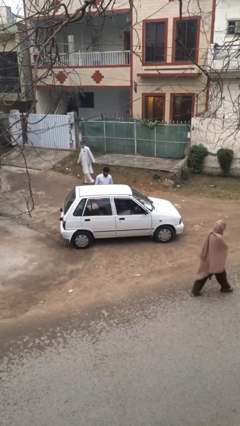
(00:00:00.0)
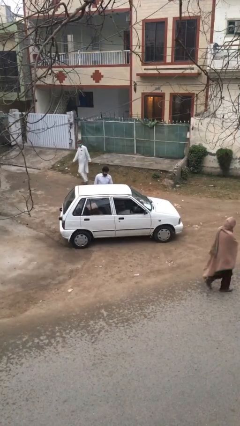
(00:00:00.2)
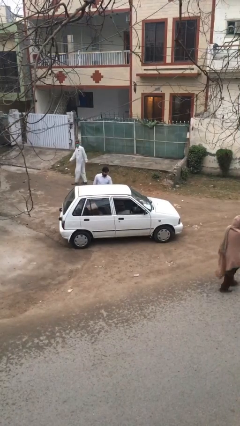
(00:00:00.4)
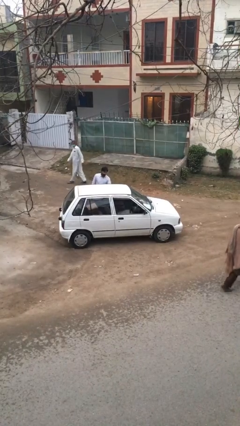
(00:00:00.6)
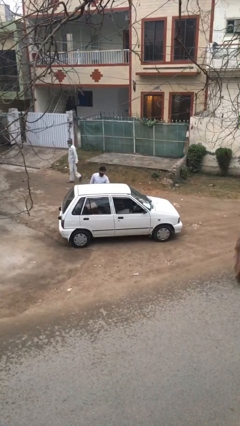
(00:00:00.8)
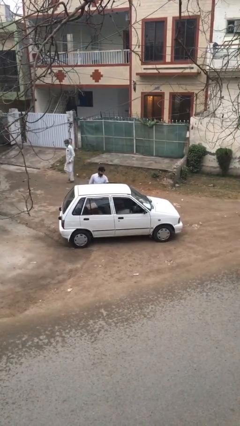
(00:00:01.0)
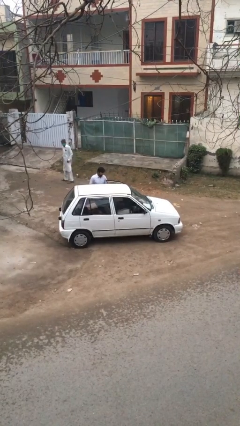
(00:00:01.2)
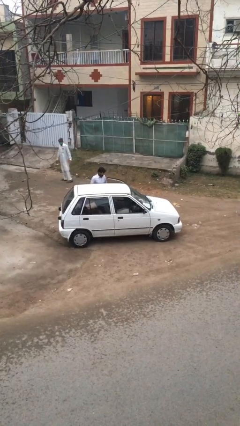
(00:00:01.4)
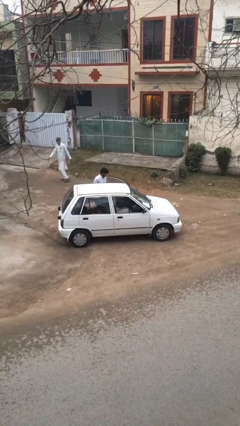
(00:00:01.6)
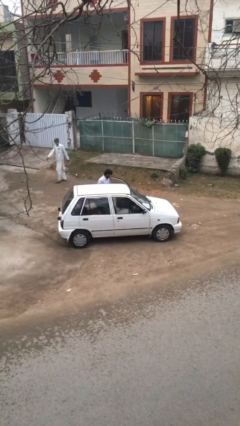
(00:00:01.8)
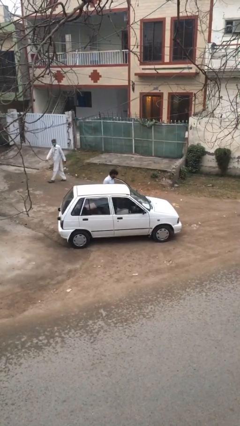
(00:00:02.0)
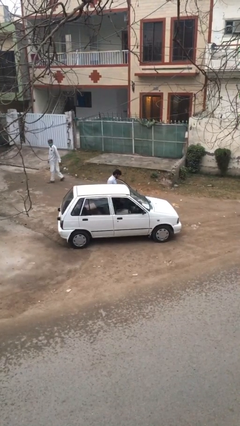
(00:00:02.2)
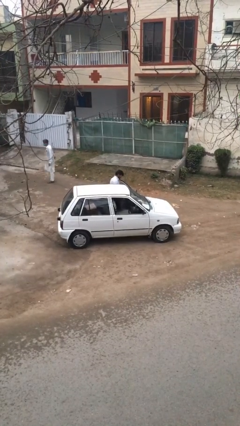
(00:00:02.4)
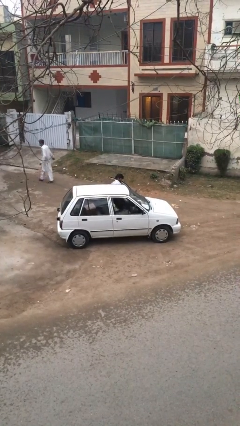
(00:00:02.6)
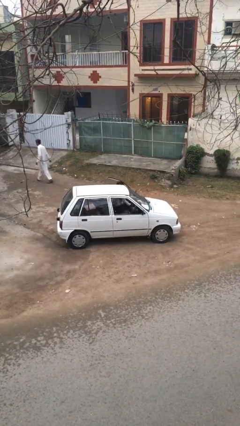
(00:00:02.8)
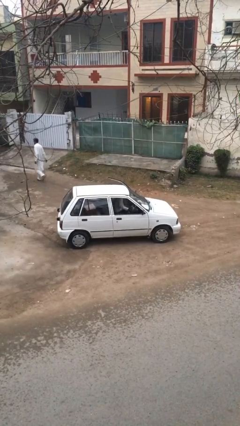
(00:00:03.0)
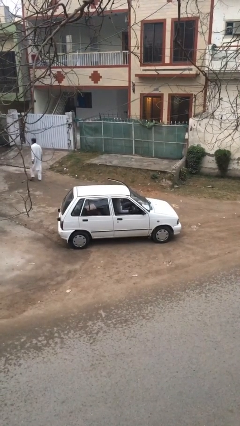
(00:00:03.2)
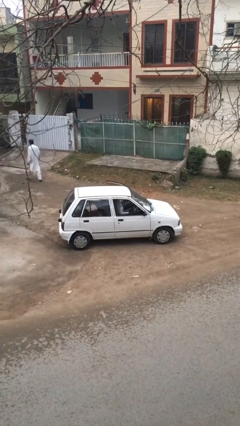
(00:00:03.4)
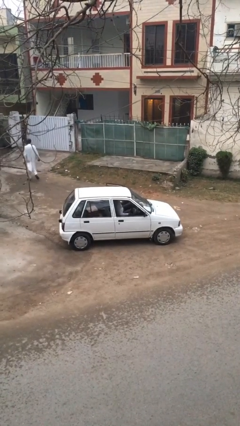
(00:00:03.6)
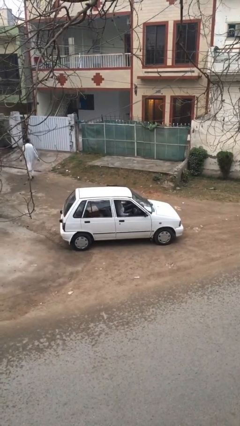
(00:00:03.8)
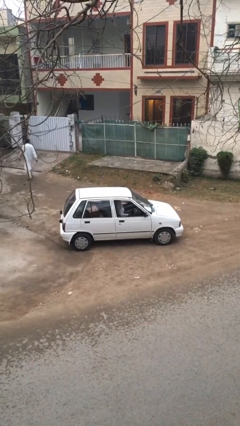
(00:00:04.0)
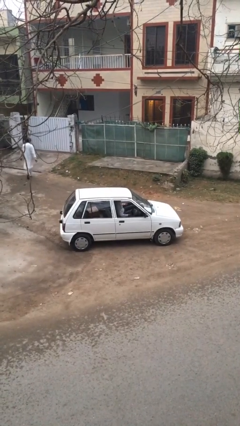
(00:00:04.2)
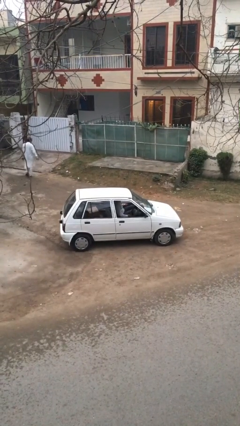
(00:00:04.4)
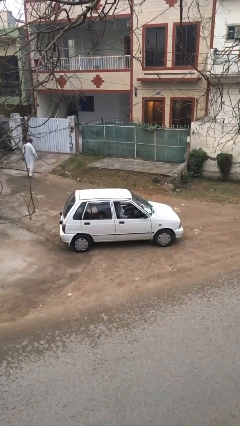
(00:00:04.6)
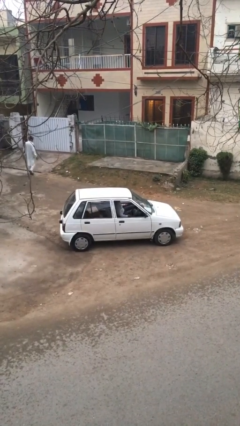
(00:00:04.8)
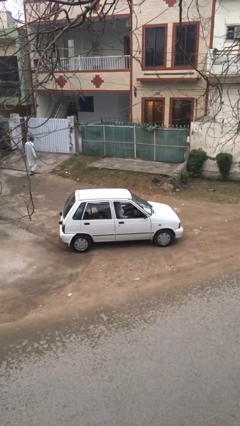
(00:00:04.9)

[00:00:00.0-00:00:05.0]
car picks up person

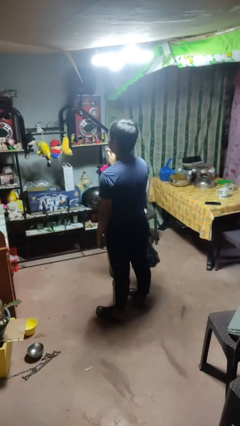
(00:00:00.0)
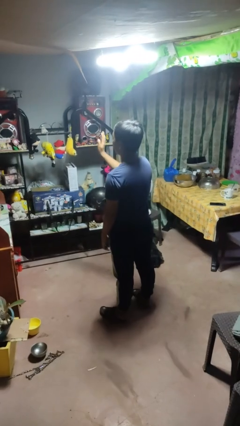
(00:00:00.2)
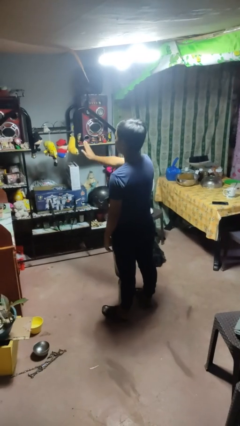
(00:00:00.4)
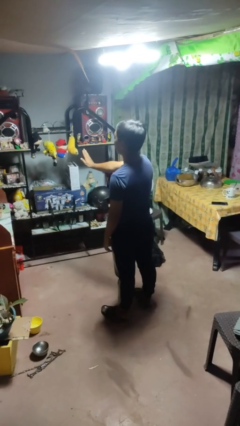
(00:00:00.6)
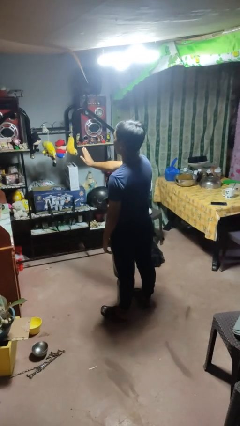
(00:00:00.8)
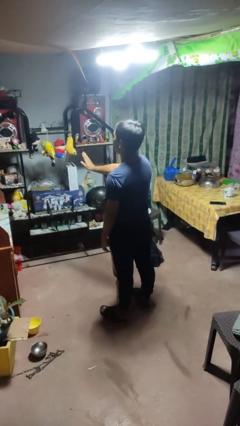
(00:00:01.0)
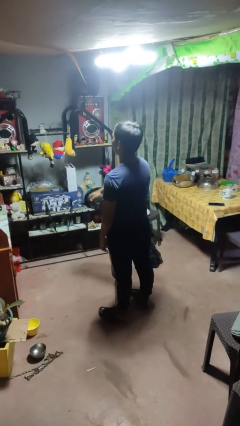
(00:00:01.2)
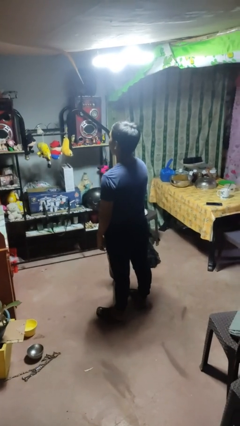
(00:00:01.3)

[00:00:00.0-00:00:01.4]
person gestures stop

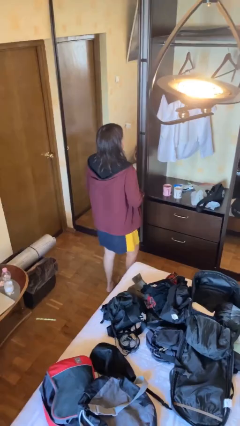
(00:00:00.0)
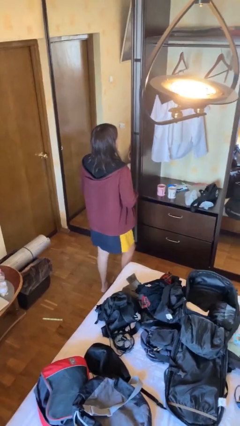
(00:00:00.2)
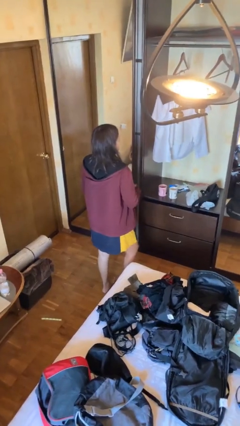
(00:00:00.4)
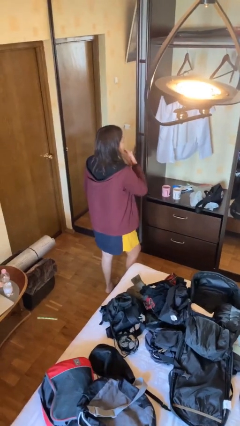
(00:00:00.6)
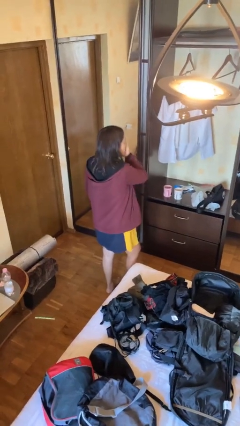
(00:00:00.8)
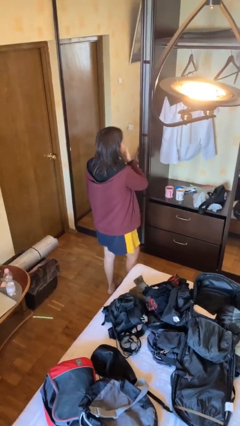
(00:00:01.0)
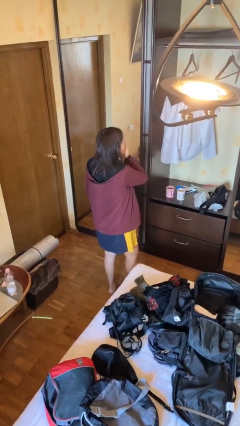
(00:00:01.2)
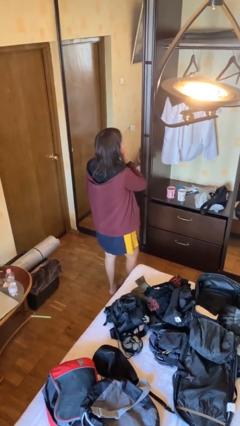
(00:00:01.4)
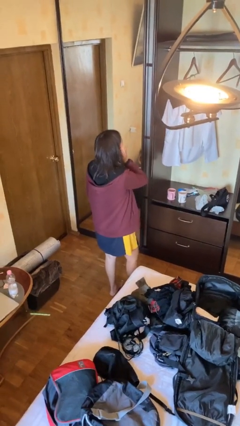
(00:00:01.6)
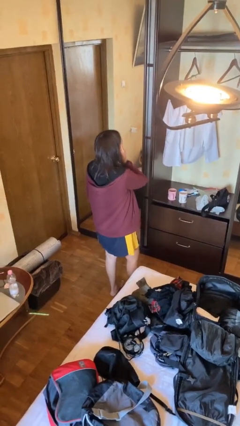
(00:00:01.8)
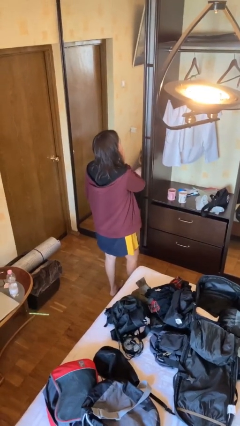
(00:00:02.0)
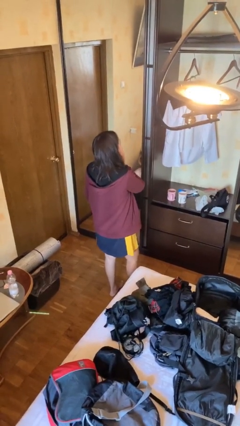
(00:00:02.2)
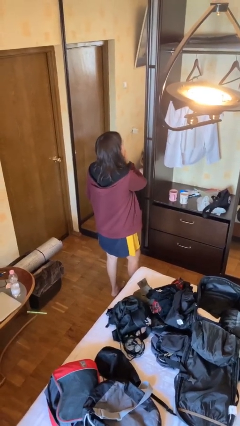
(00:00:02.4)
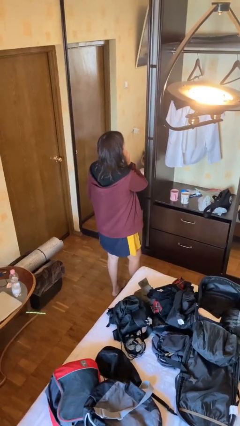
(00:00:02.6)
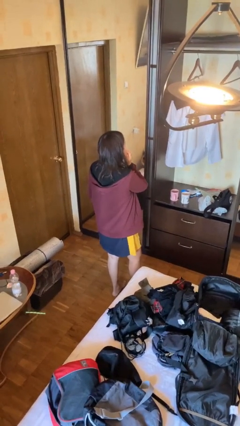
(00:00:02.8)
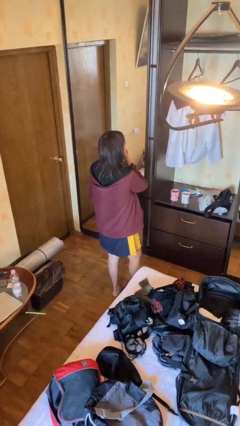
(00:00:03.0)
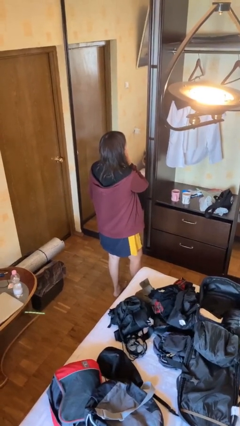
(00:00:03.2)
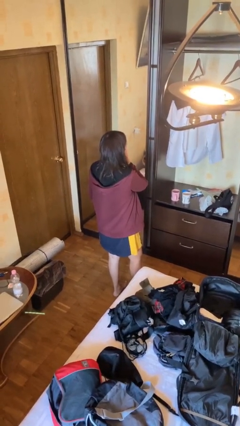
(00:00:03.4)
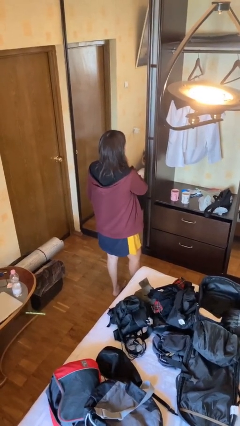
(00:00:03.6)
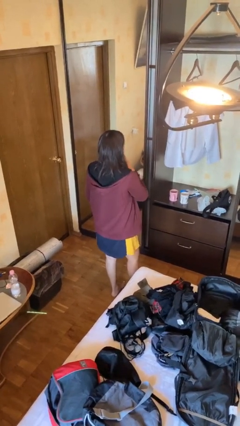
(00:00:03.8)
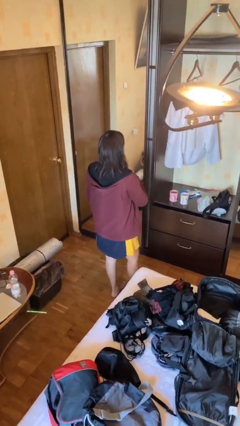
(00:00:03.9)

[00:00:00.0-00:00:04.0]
person scratches face

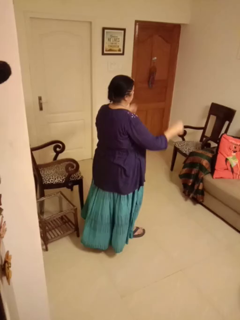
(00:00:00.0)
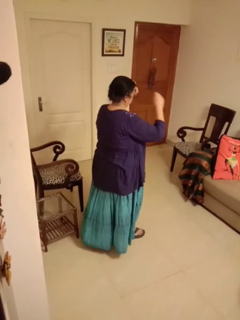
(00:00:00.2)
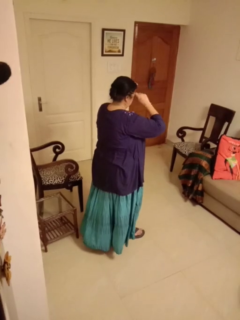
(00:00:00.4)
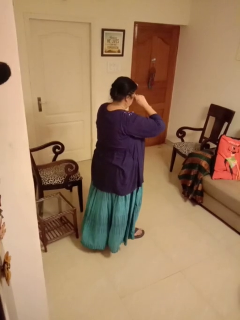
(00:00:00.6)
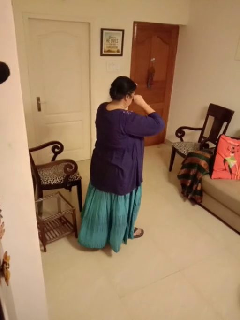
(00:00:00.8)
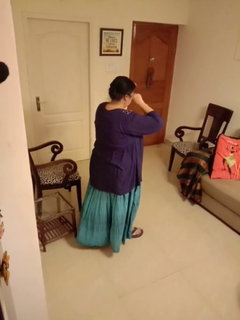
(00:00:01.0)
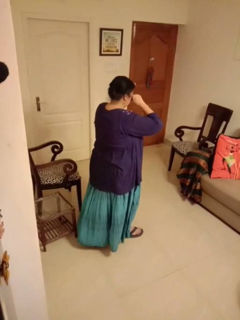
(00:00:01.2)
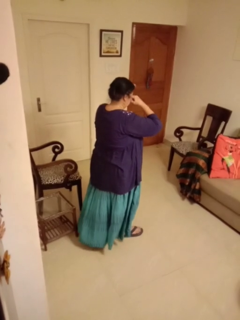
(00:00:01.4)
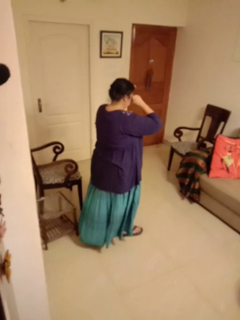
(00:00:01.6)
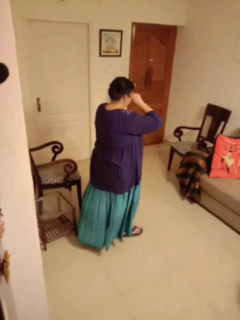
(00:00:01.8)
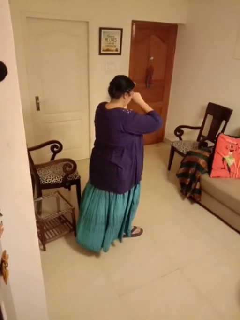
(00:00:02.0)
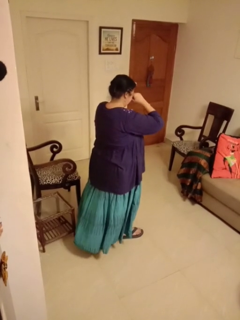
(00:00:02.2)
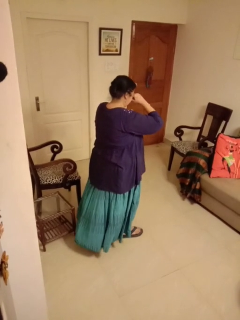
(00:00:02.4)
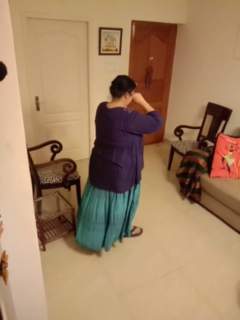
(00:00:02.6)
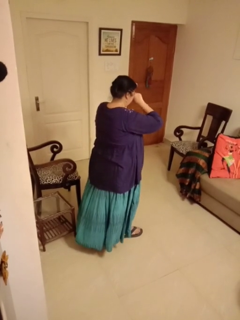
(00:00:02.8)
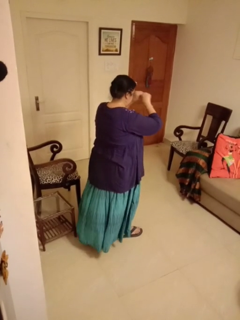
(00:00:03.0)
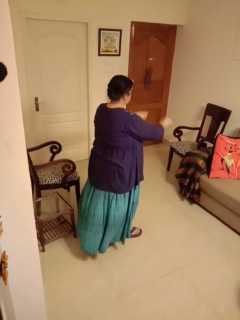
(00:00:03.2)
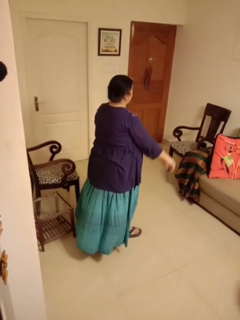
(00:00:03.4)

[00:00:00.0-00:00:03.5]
person rubs eyes

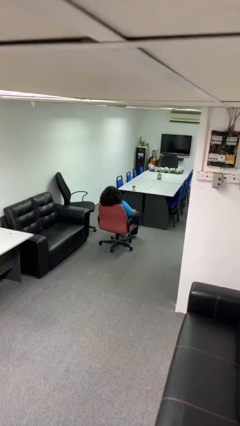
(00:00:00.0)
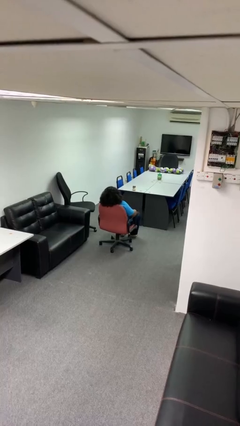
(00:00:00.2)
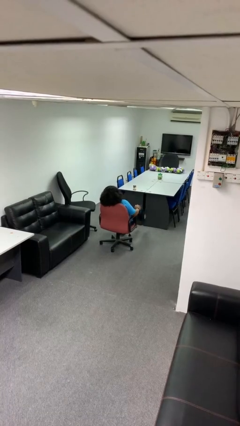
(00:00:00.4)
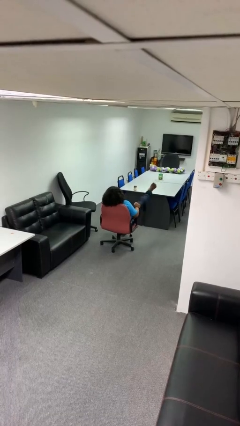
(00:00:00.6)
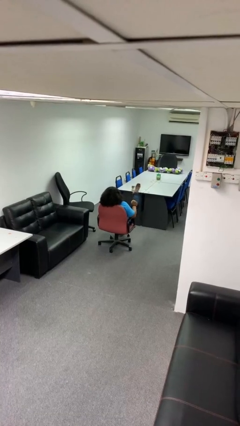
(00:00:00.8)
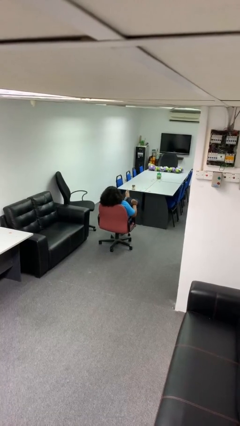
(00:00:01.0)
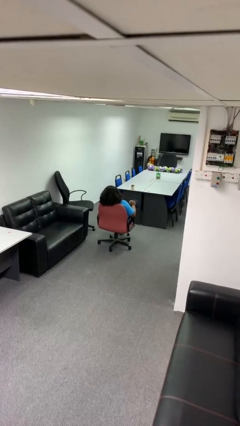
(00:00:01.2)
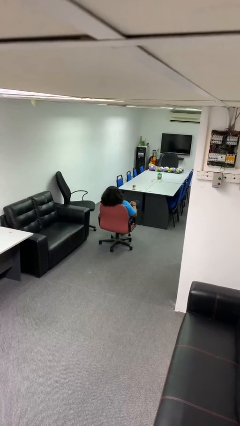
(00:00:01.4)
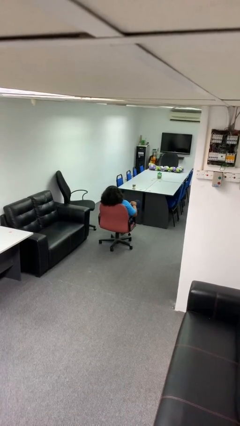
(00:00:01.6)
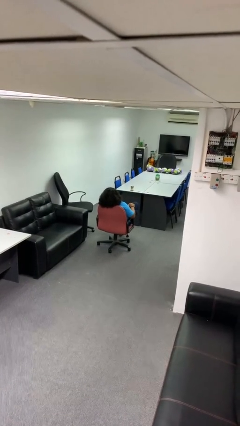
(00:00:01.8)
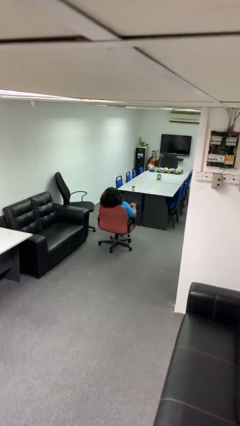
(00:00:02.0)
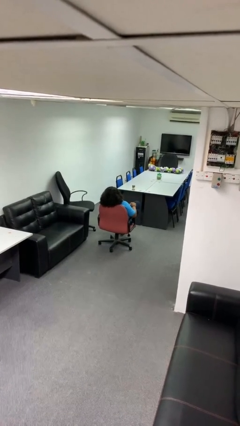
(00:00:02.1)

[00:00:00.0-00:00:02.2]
person crosses legs

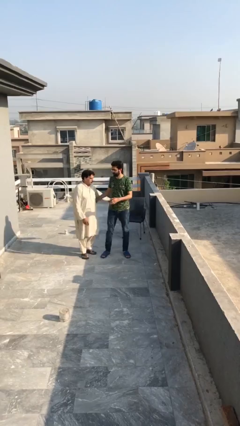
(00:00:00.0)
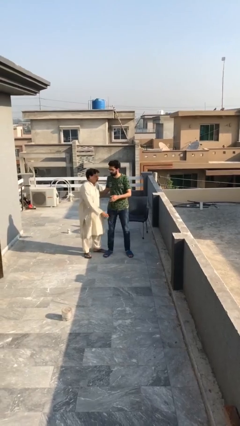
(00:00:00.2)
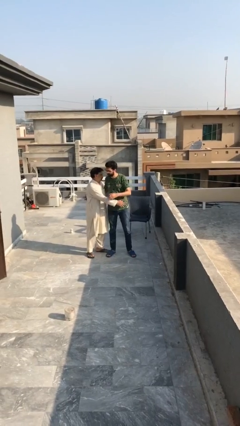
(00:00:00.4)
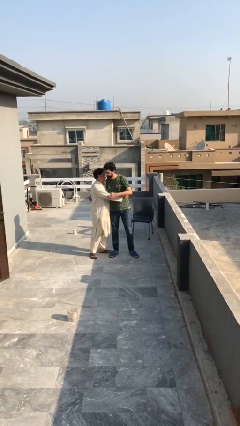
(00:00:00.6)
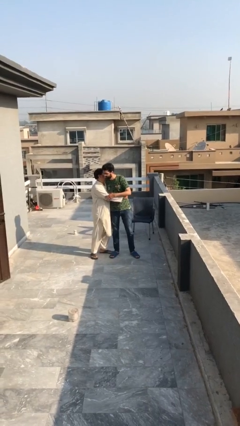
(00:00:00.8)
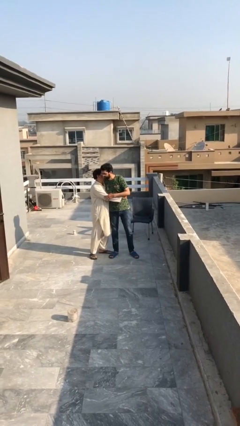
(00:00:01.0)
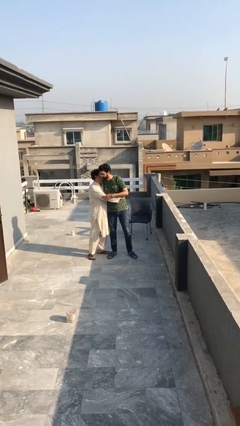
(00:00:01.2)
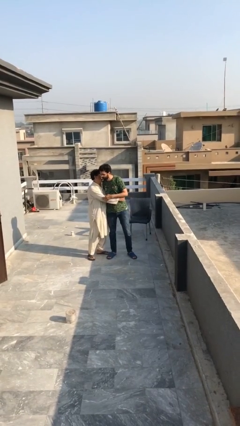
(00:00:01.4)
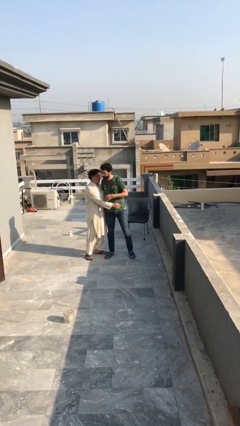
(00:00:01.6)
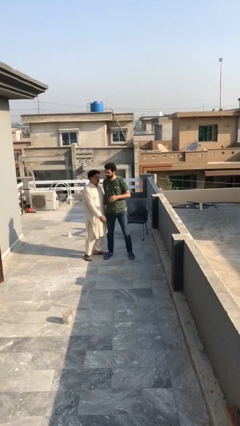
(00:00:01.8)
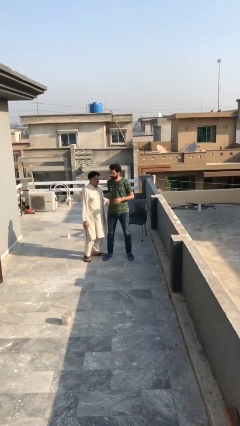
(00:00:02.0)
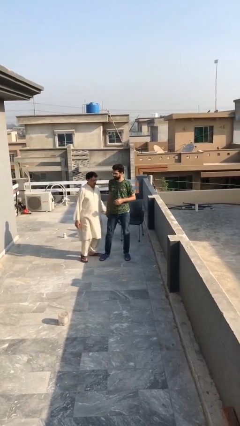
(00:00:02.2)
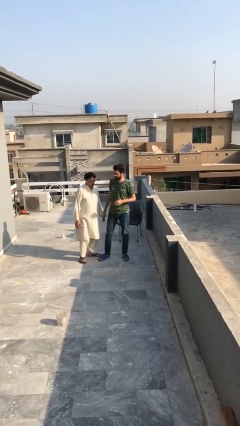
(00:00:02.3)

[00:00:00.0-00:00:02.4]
person embraces person
